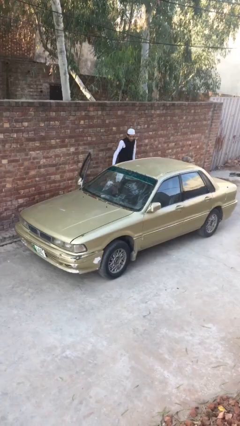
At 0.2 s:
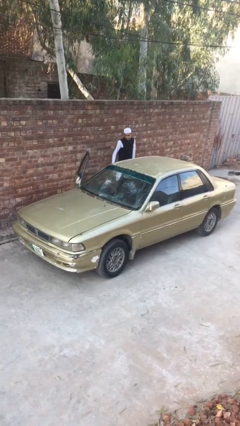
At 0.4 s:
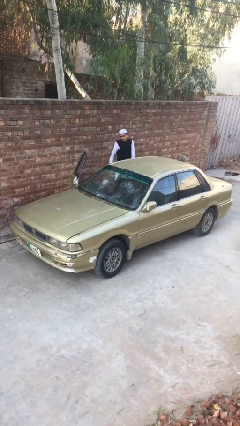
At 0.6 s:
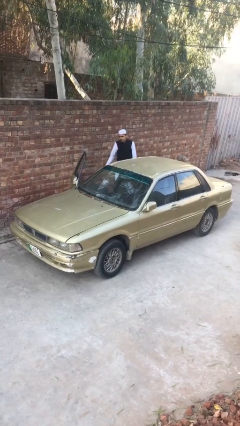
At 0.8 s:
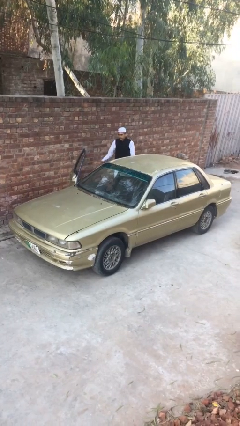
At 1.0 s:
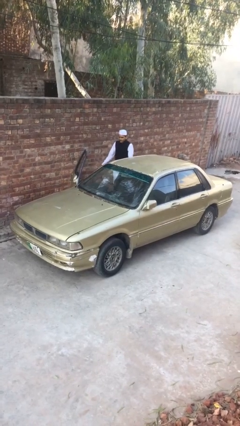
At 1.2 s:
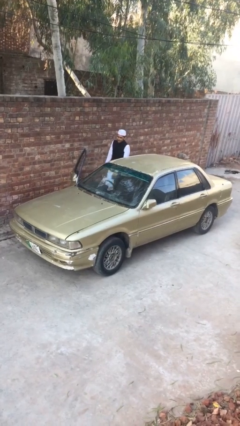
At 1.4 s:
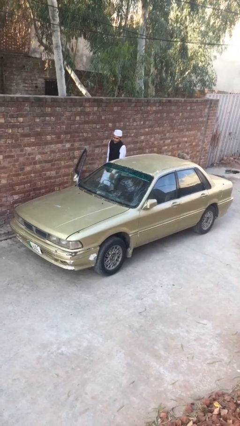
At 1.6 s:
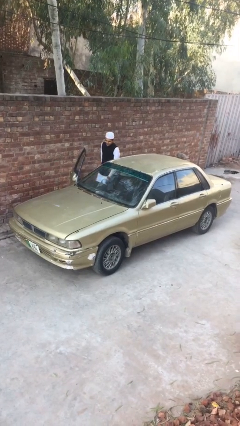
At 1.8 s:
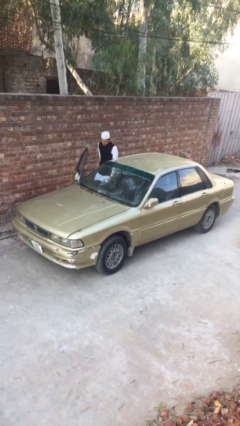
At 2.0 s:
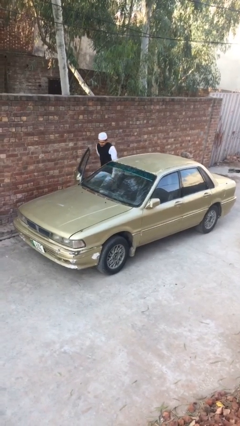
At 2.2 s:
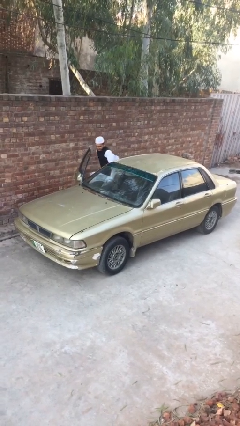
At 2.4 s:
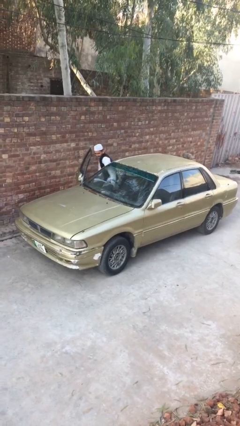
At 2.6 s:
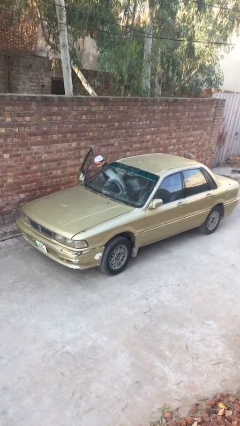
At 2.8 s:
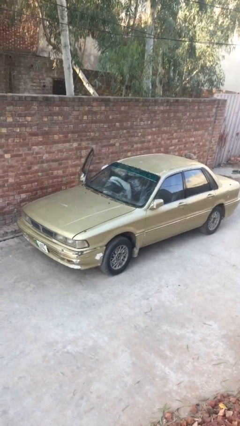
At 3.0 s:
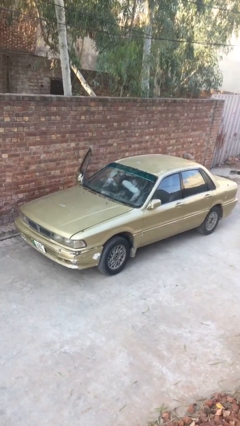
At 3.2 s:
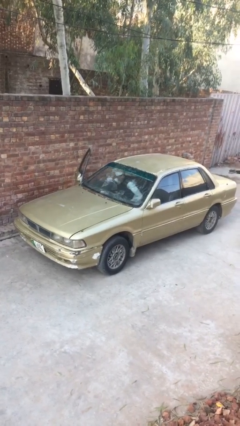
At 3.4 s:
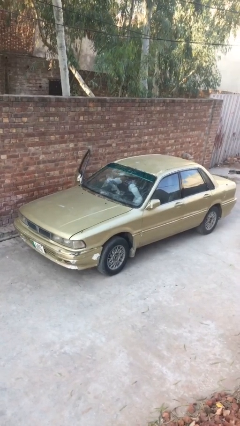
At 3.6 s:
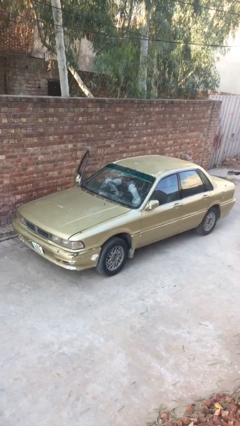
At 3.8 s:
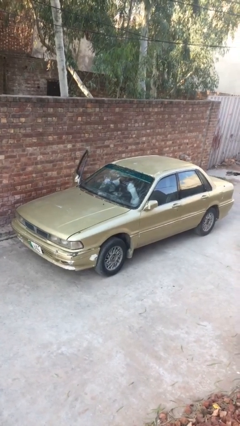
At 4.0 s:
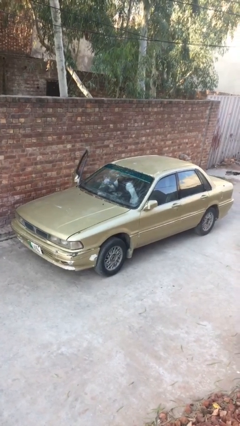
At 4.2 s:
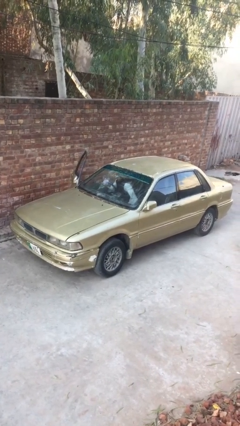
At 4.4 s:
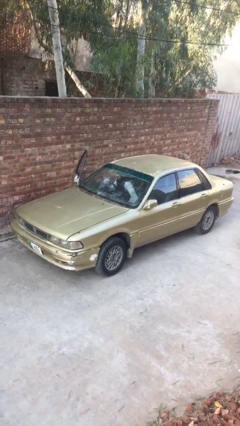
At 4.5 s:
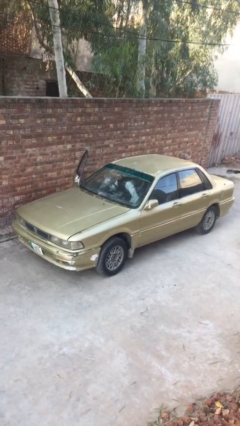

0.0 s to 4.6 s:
person enters car

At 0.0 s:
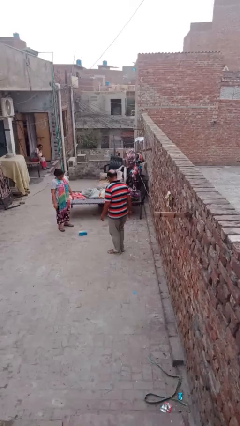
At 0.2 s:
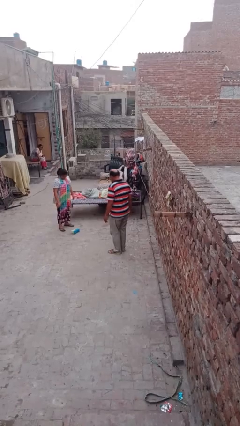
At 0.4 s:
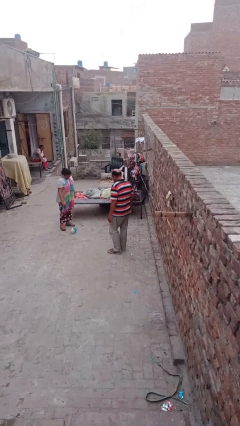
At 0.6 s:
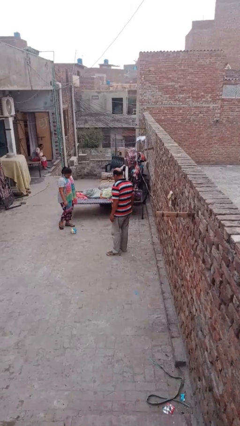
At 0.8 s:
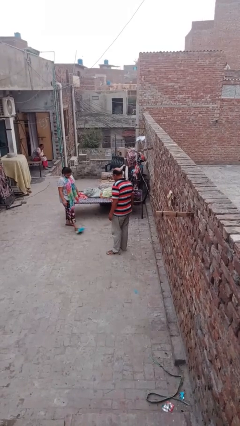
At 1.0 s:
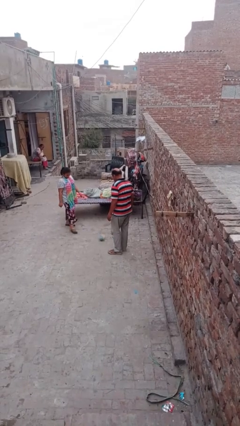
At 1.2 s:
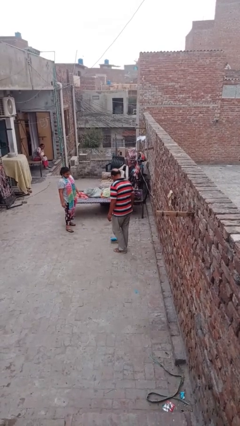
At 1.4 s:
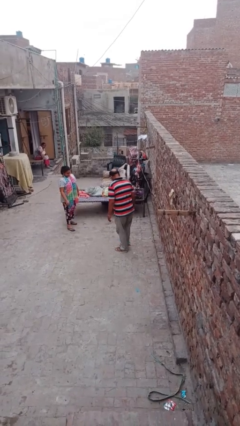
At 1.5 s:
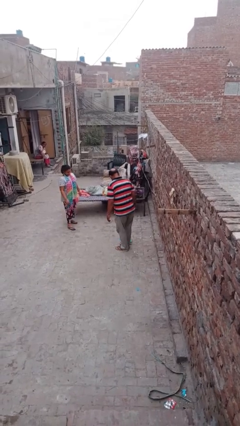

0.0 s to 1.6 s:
person kicks object to person

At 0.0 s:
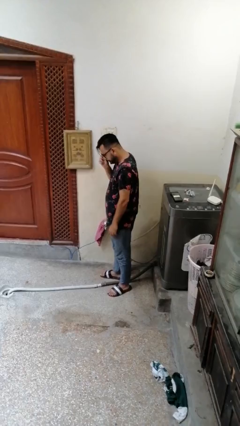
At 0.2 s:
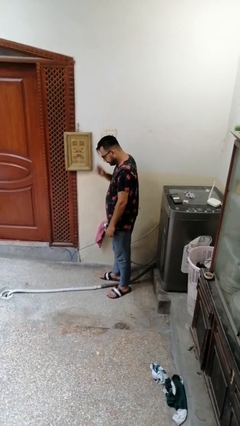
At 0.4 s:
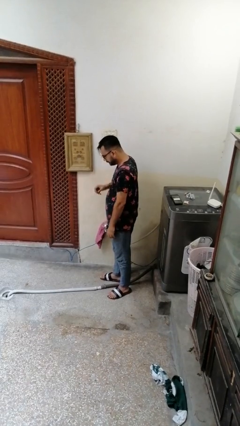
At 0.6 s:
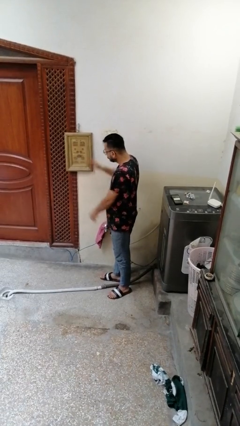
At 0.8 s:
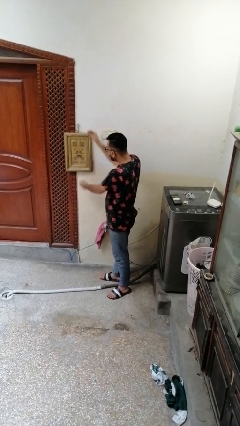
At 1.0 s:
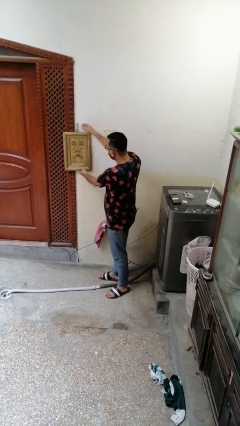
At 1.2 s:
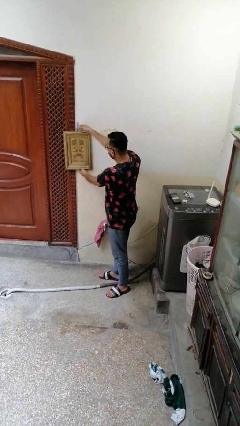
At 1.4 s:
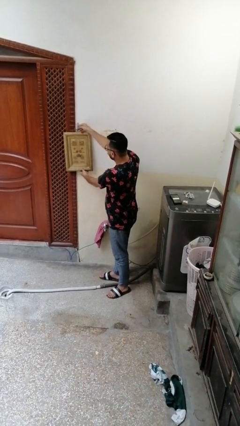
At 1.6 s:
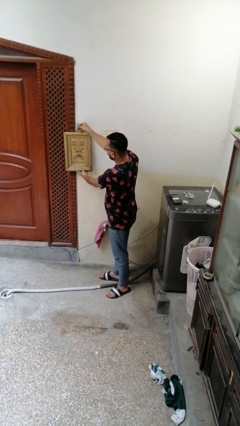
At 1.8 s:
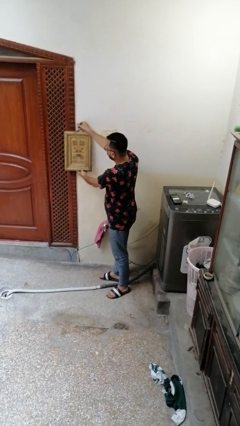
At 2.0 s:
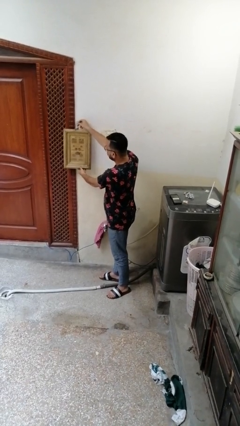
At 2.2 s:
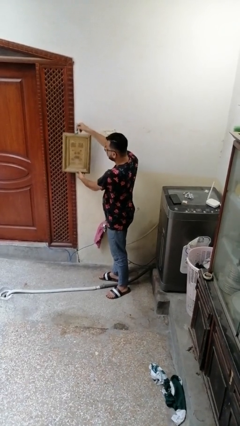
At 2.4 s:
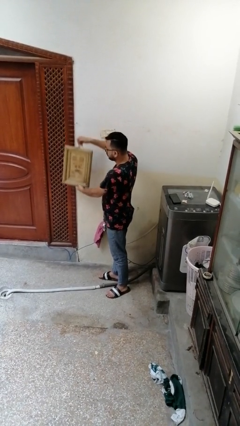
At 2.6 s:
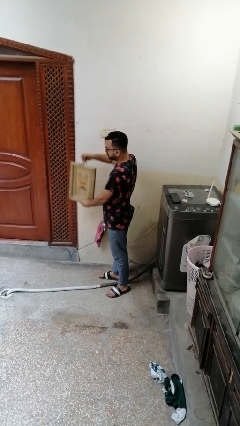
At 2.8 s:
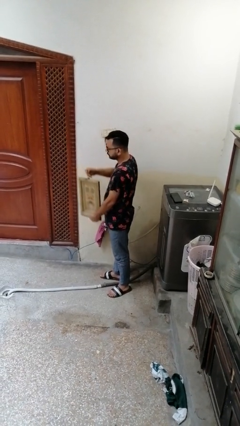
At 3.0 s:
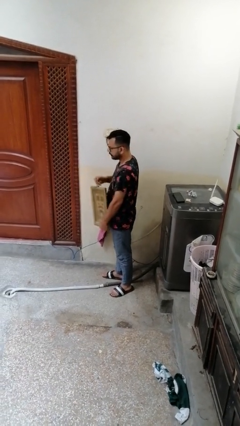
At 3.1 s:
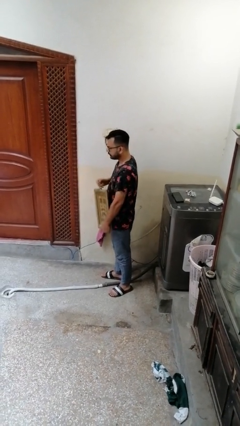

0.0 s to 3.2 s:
person takes down picture frame

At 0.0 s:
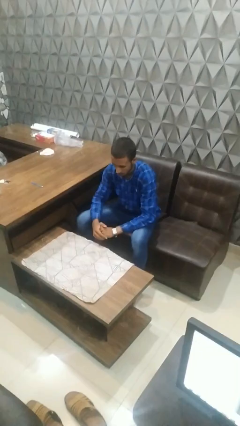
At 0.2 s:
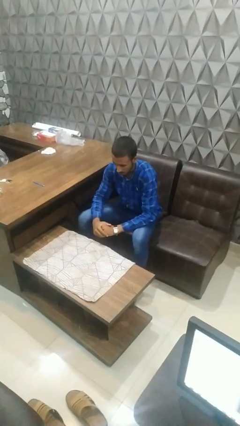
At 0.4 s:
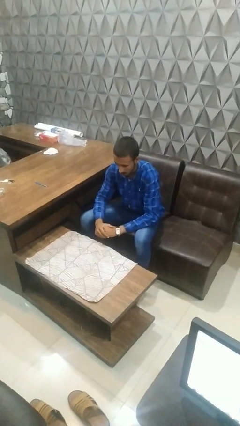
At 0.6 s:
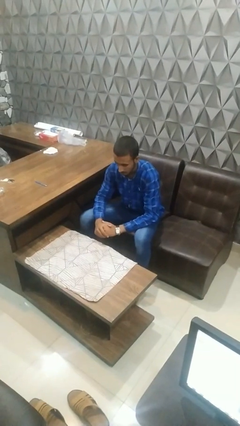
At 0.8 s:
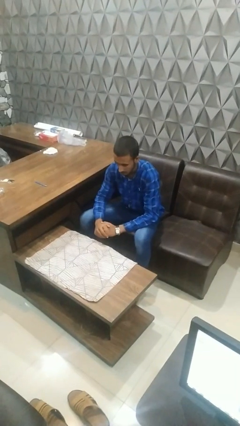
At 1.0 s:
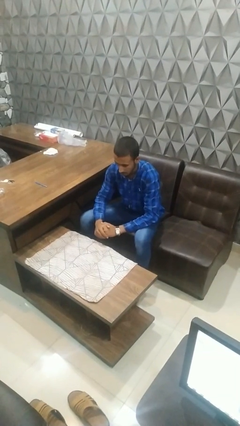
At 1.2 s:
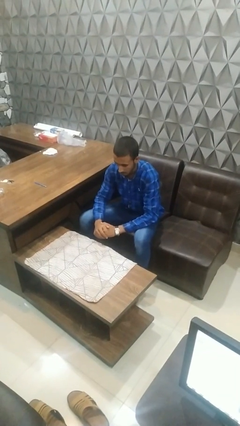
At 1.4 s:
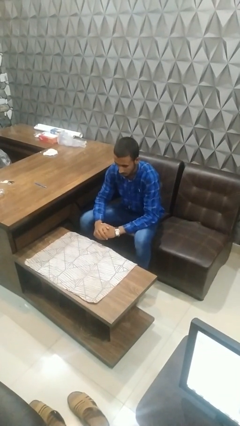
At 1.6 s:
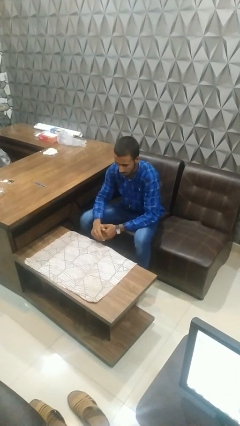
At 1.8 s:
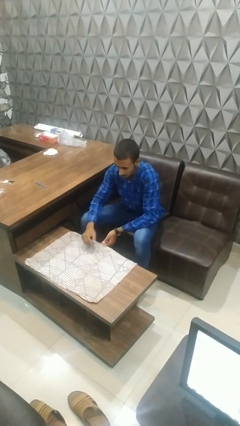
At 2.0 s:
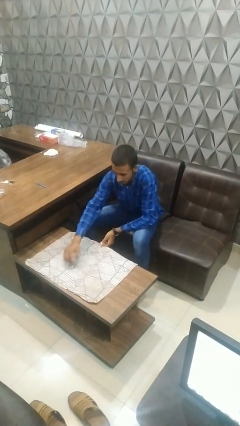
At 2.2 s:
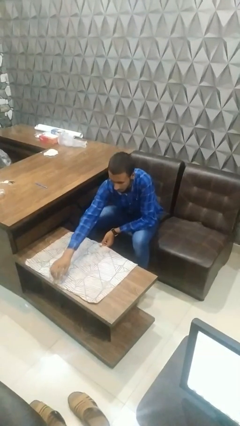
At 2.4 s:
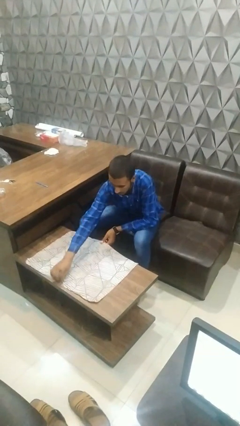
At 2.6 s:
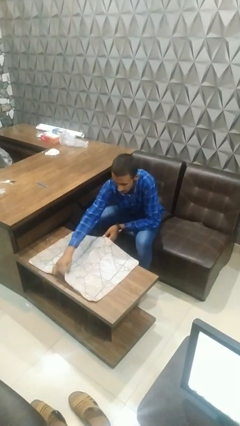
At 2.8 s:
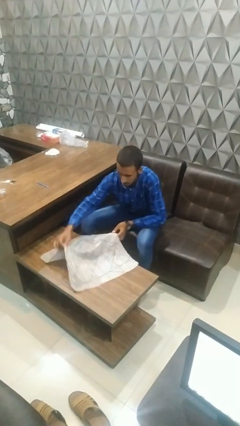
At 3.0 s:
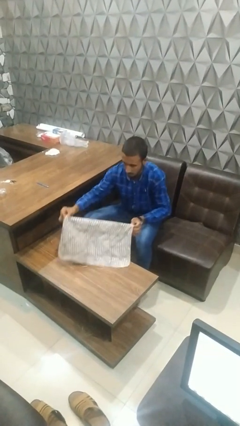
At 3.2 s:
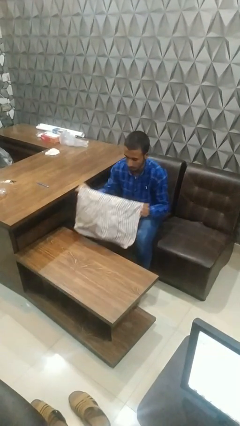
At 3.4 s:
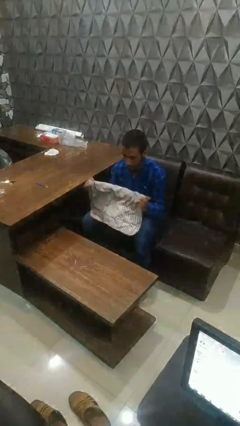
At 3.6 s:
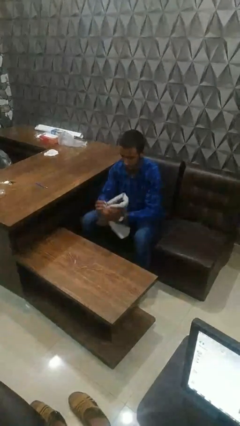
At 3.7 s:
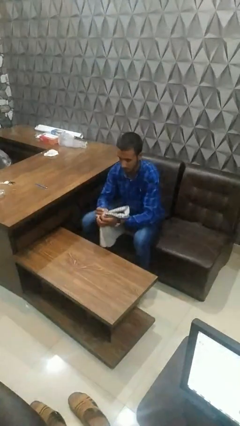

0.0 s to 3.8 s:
person folds tablecloth

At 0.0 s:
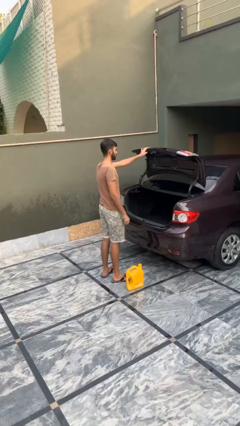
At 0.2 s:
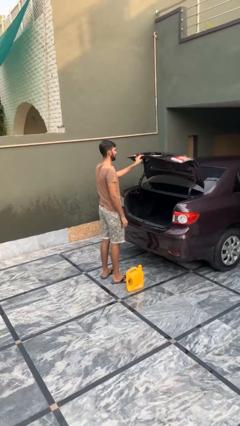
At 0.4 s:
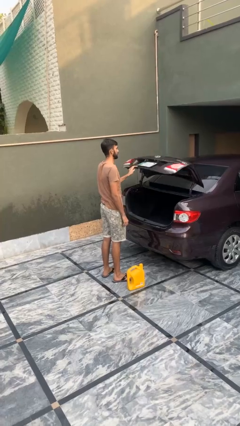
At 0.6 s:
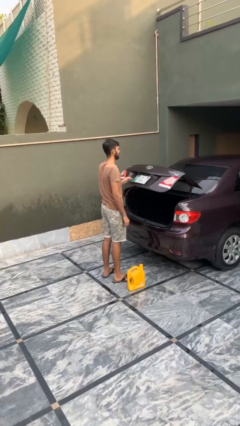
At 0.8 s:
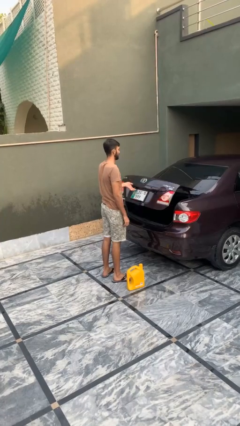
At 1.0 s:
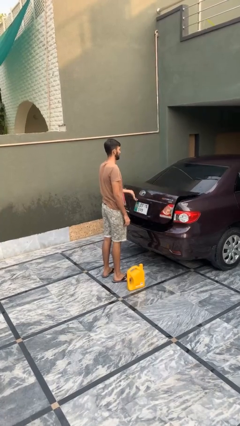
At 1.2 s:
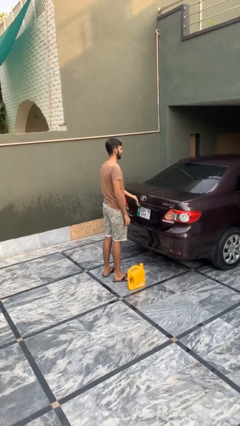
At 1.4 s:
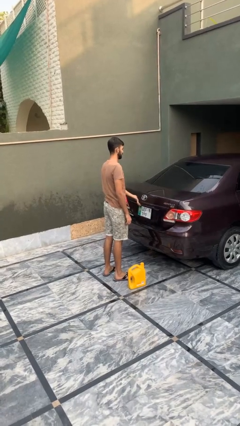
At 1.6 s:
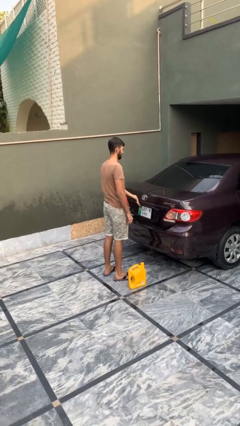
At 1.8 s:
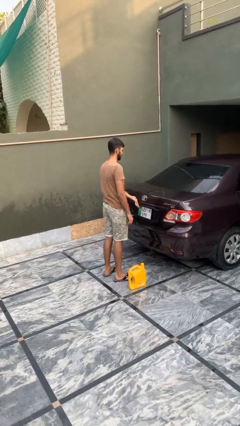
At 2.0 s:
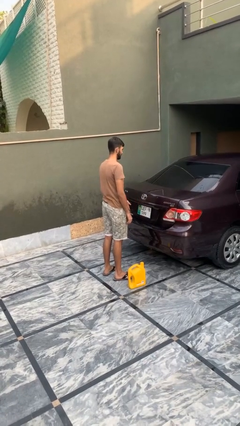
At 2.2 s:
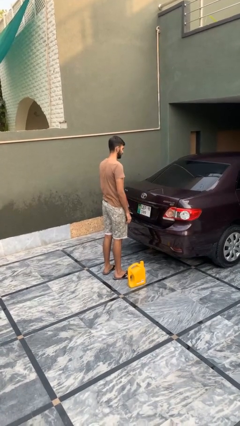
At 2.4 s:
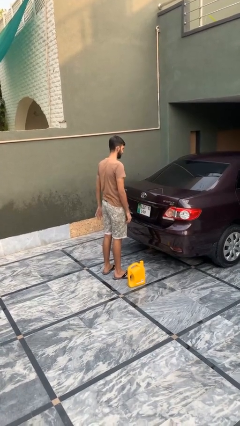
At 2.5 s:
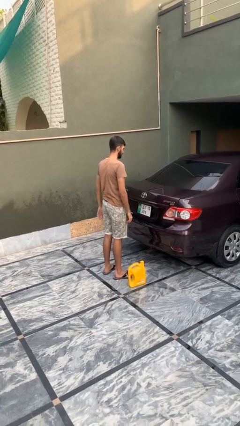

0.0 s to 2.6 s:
person closes car trunk

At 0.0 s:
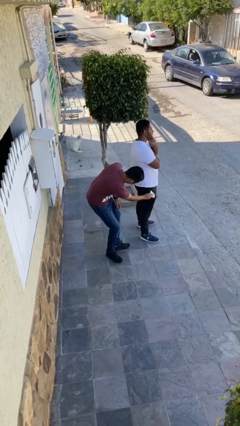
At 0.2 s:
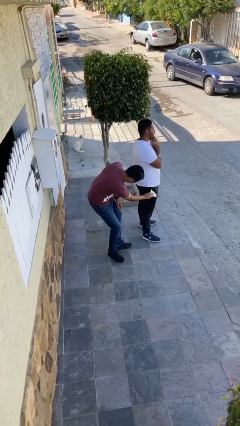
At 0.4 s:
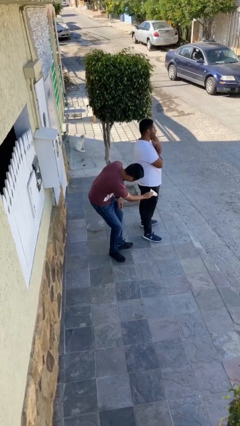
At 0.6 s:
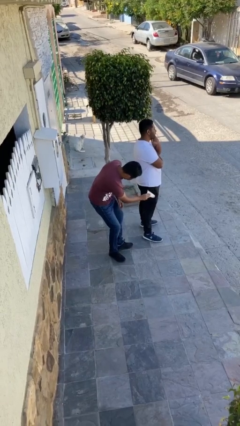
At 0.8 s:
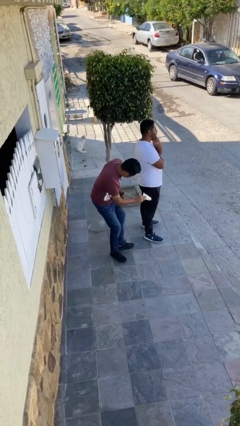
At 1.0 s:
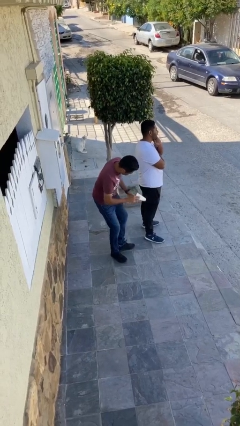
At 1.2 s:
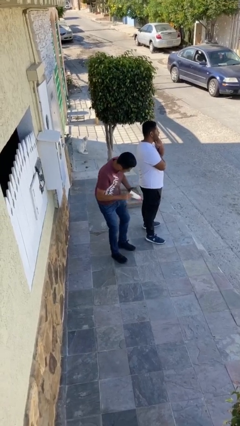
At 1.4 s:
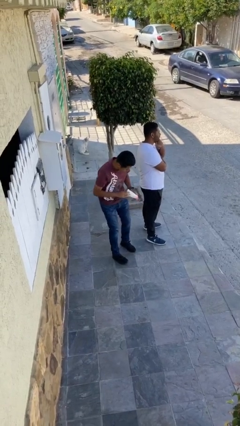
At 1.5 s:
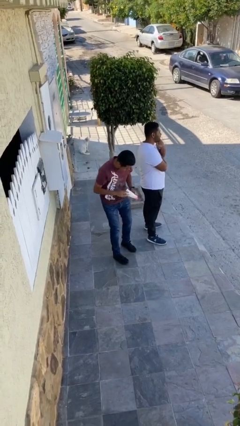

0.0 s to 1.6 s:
person steals object from person
